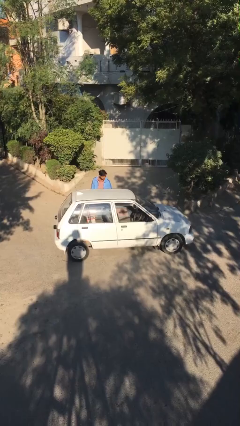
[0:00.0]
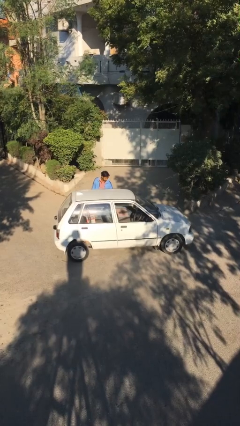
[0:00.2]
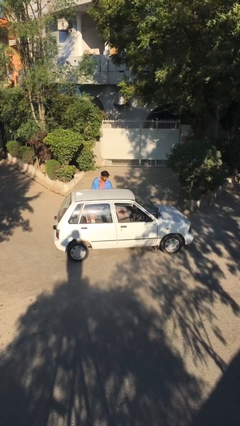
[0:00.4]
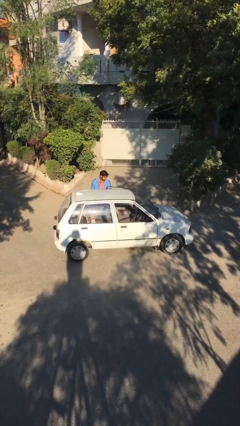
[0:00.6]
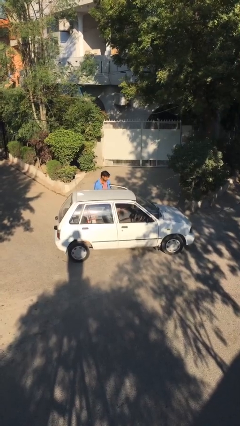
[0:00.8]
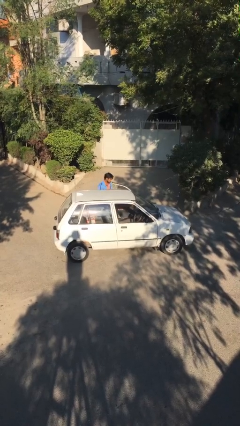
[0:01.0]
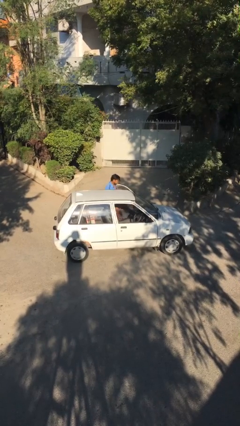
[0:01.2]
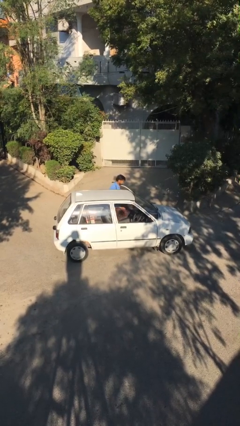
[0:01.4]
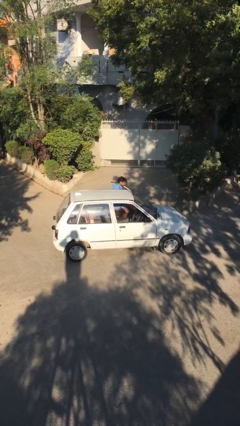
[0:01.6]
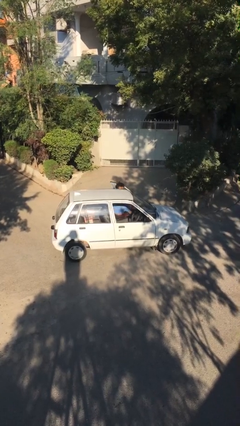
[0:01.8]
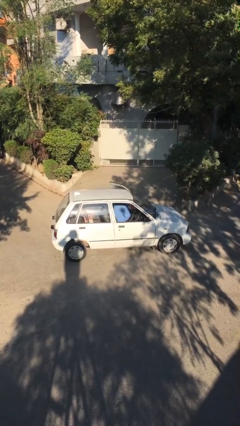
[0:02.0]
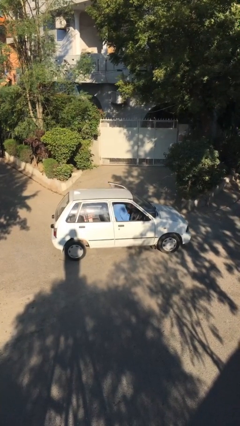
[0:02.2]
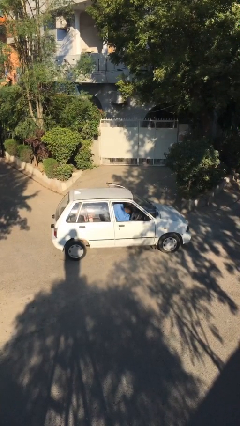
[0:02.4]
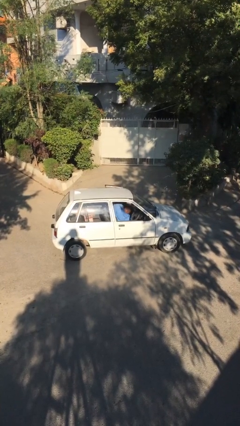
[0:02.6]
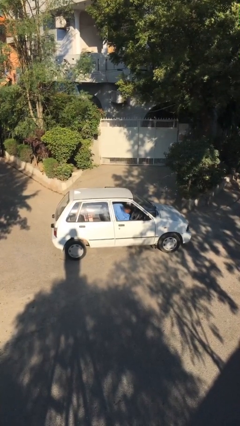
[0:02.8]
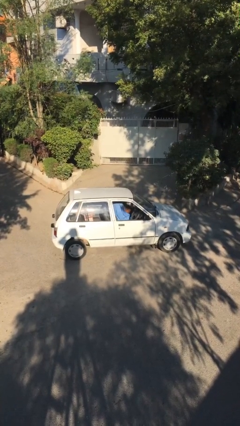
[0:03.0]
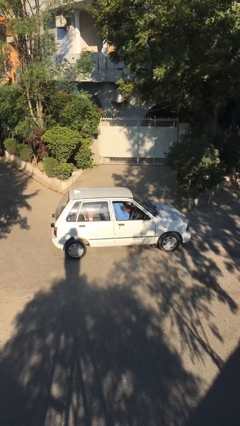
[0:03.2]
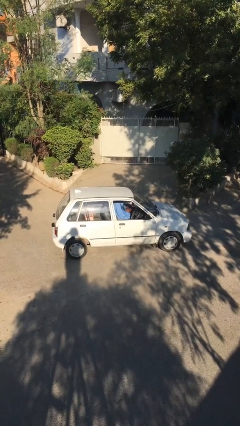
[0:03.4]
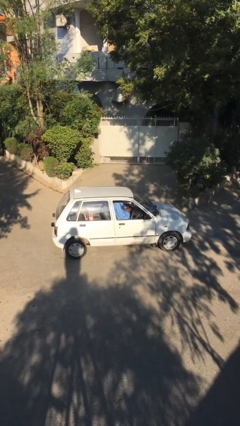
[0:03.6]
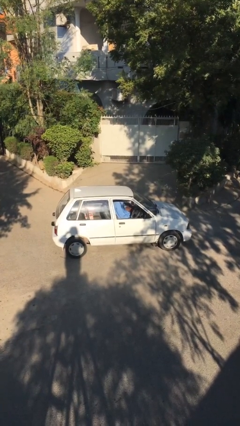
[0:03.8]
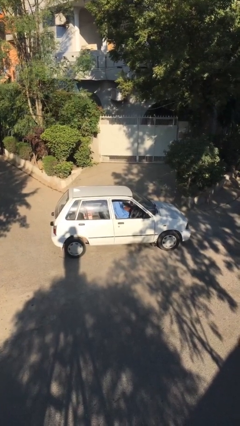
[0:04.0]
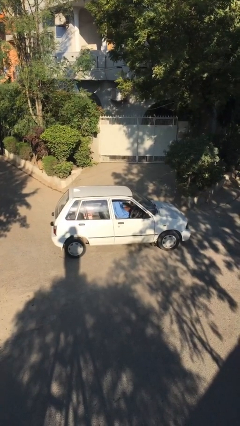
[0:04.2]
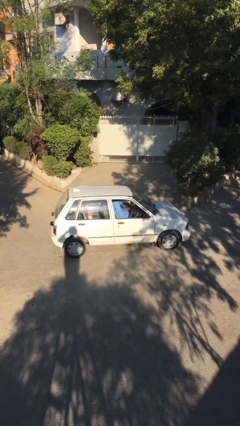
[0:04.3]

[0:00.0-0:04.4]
car picks up person

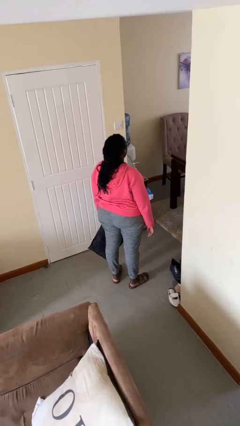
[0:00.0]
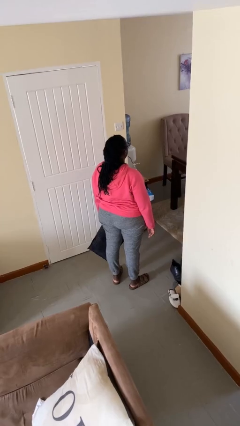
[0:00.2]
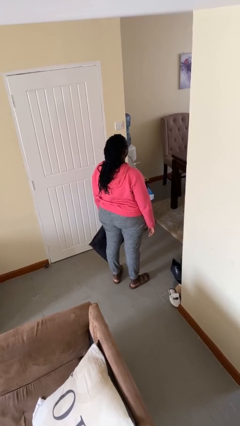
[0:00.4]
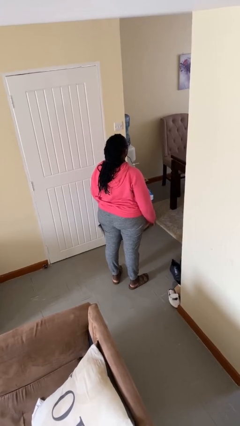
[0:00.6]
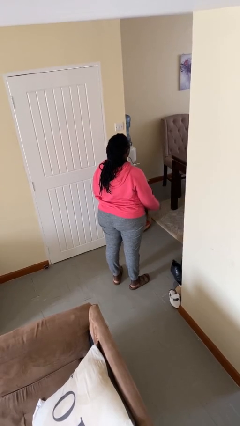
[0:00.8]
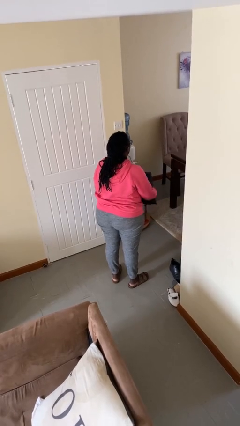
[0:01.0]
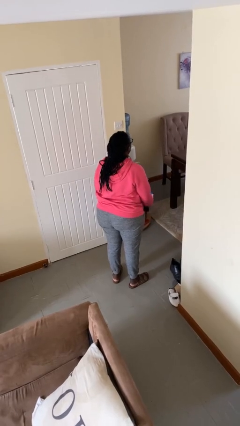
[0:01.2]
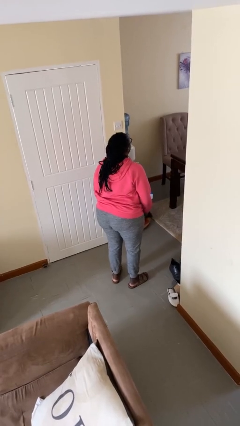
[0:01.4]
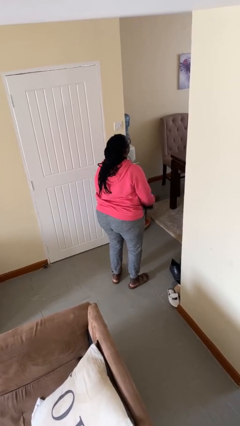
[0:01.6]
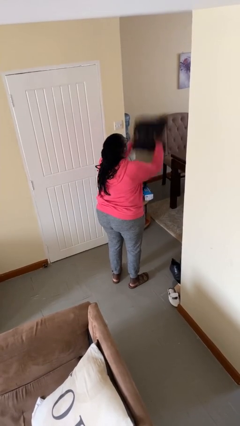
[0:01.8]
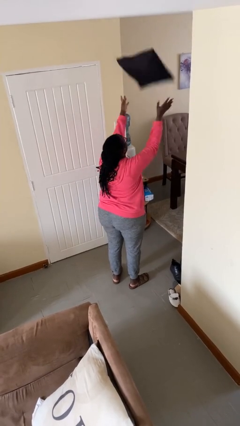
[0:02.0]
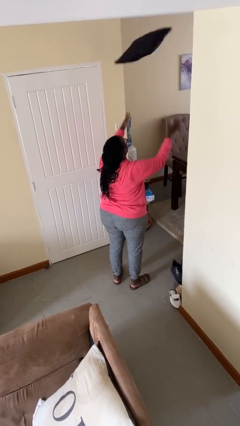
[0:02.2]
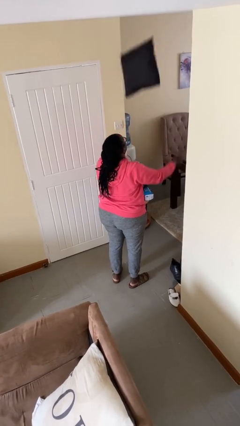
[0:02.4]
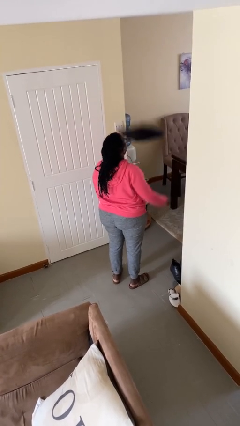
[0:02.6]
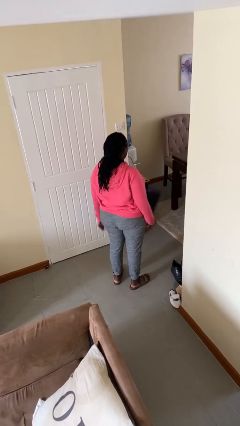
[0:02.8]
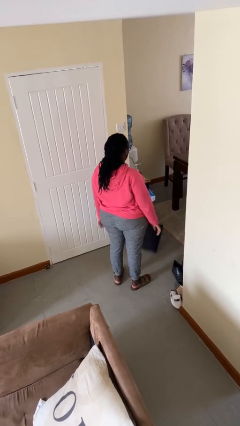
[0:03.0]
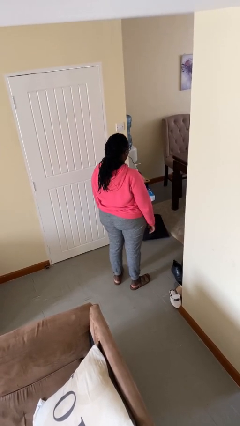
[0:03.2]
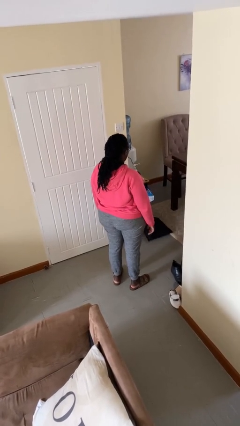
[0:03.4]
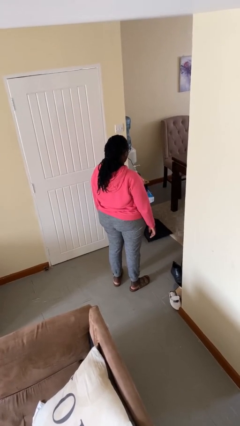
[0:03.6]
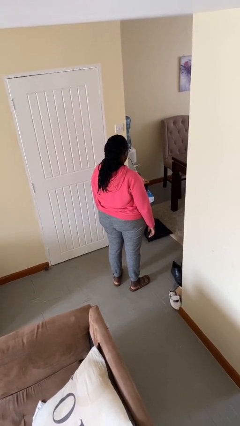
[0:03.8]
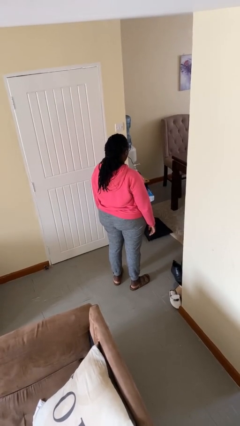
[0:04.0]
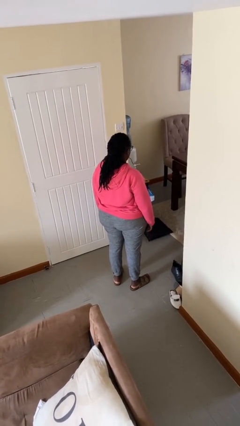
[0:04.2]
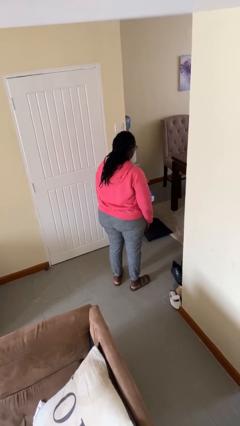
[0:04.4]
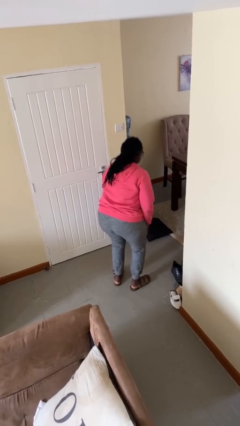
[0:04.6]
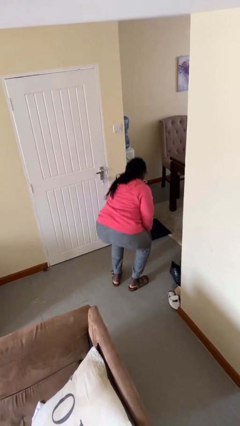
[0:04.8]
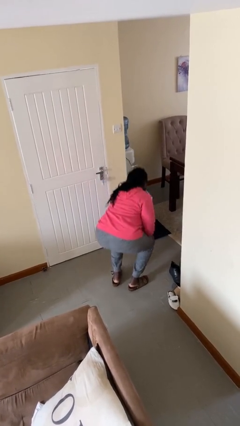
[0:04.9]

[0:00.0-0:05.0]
person throws object into air

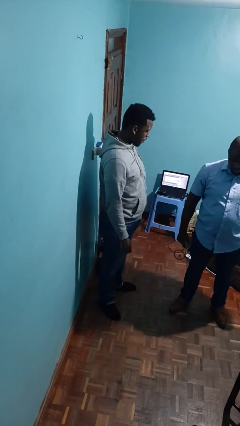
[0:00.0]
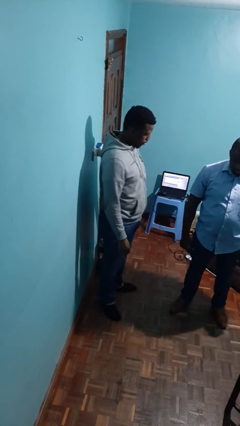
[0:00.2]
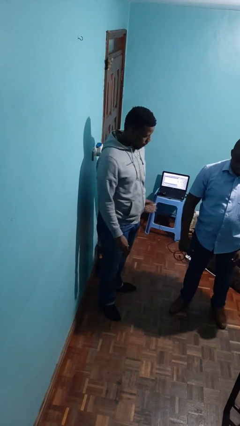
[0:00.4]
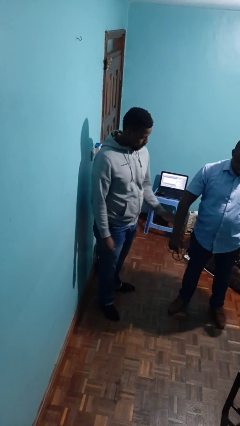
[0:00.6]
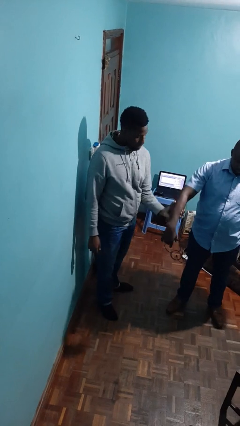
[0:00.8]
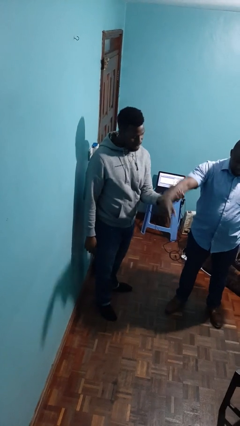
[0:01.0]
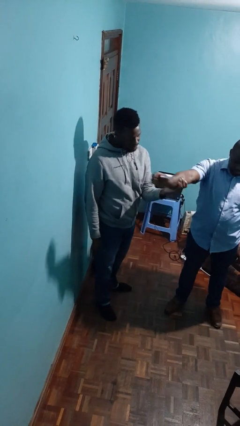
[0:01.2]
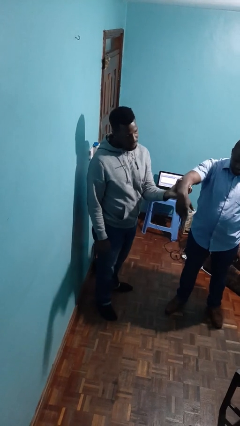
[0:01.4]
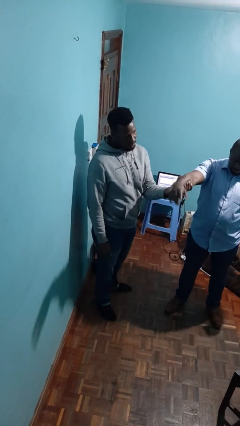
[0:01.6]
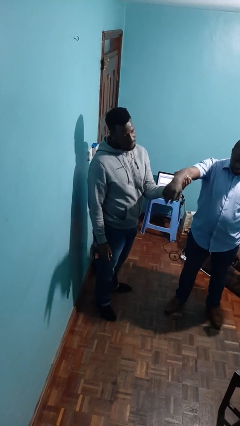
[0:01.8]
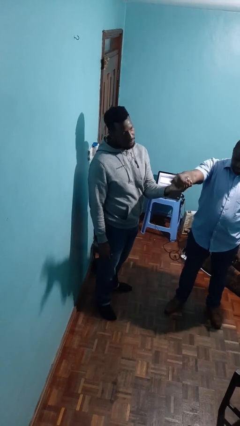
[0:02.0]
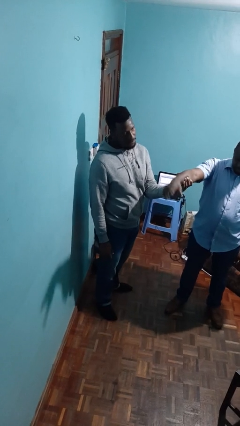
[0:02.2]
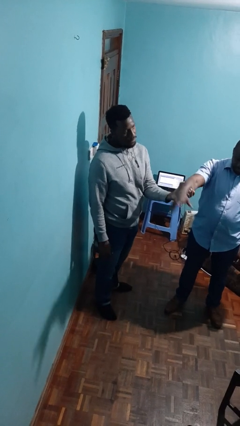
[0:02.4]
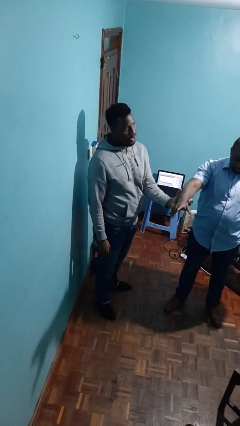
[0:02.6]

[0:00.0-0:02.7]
person grabs person by forearm

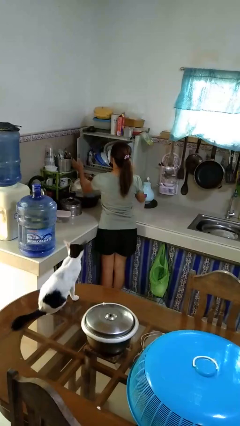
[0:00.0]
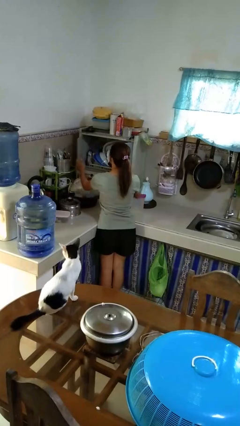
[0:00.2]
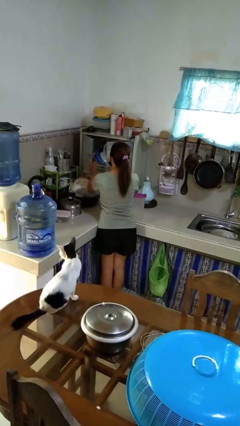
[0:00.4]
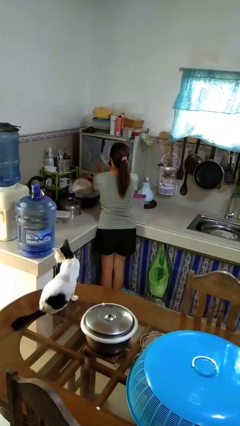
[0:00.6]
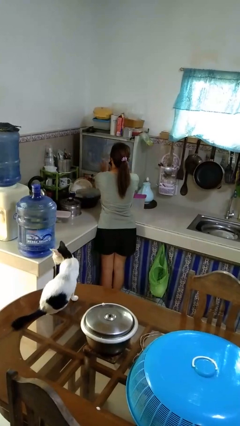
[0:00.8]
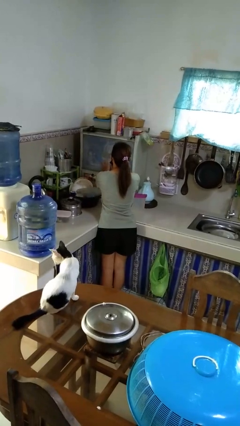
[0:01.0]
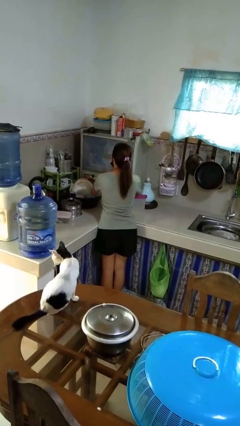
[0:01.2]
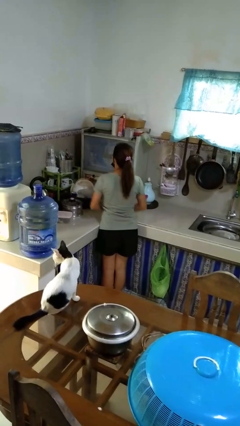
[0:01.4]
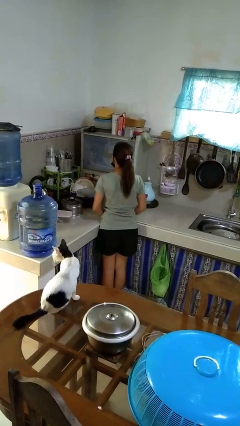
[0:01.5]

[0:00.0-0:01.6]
person closes kitchen drawer

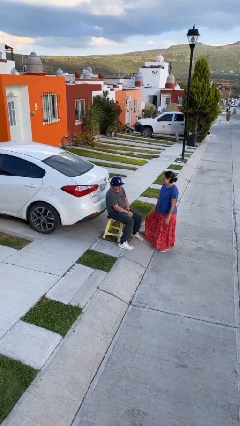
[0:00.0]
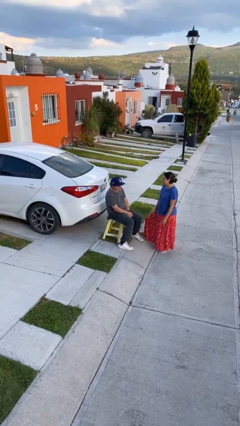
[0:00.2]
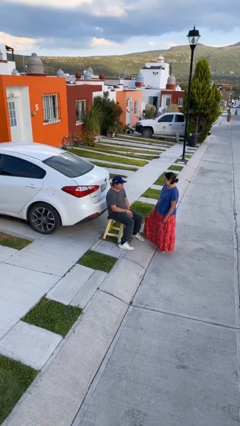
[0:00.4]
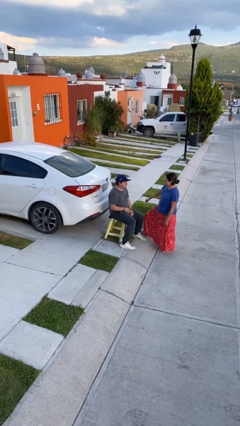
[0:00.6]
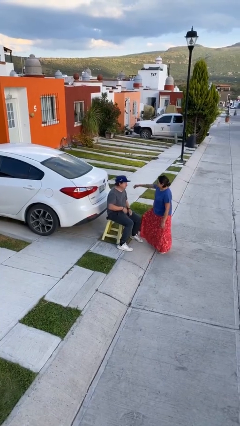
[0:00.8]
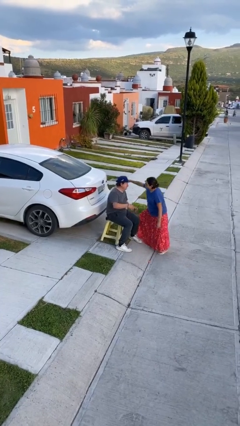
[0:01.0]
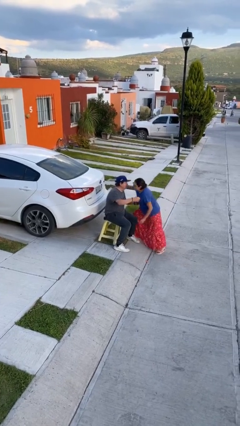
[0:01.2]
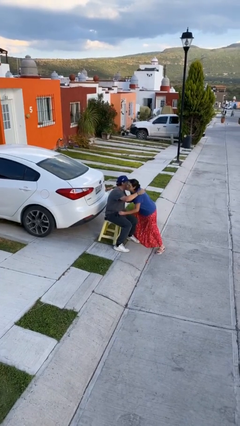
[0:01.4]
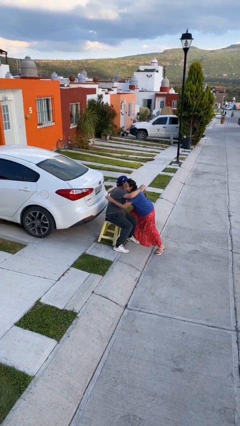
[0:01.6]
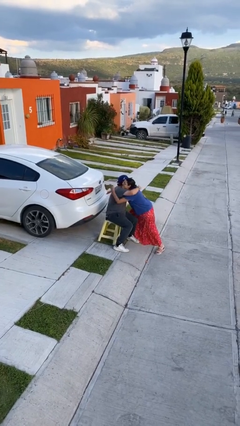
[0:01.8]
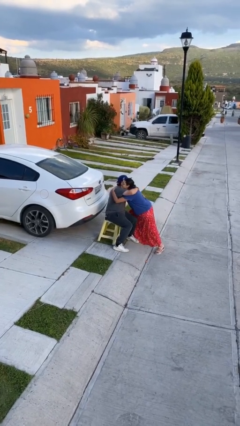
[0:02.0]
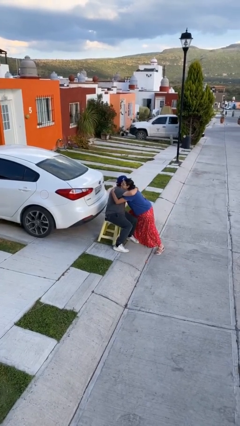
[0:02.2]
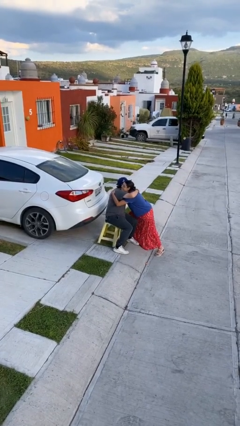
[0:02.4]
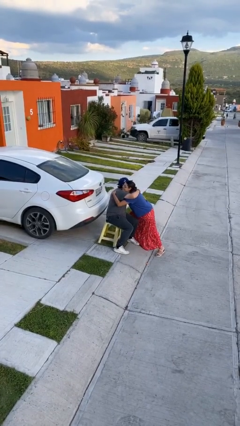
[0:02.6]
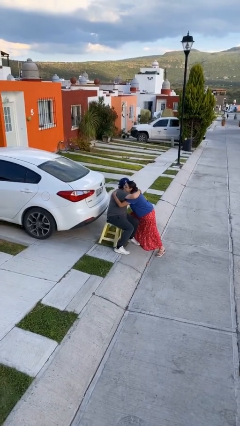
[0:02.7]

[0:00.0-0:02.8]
person embraces person

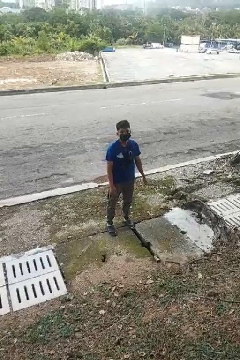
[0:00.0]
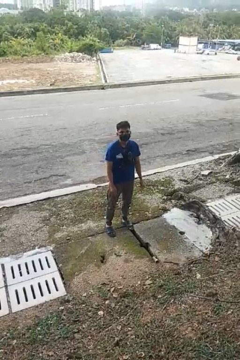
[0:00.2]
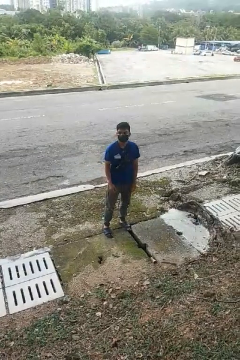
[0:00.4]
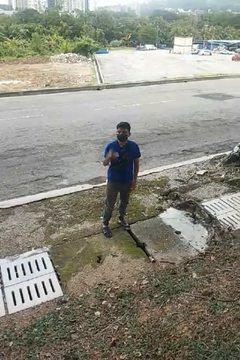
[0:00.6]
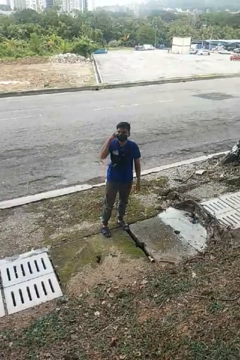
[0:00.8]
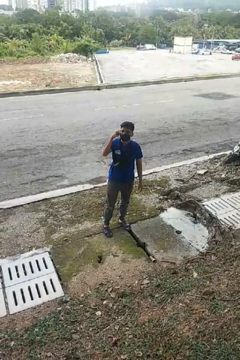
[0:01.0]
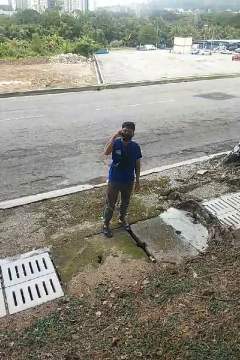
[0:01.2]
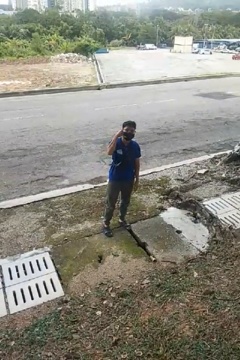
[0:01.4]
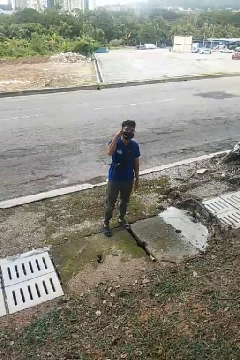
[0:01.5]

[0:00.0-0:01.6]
person gestures call me
